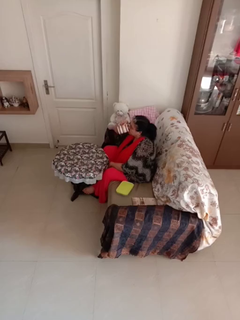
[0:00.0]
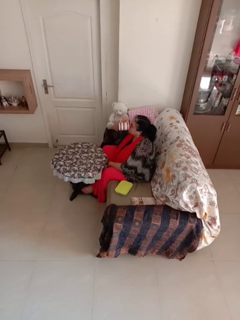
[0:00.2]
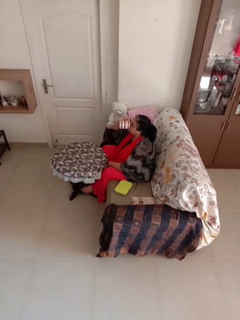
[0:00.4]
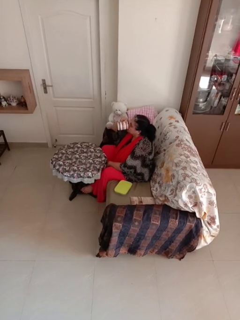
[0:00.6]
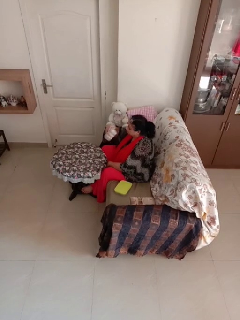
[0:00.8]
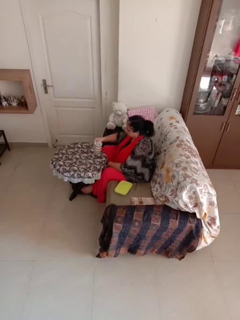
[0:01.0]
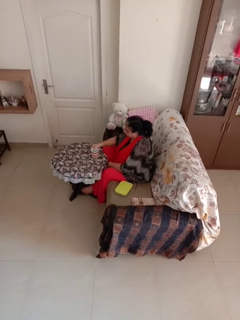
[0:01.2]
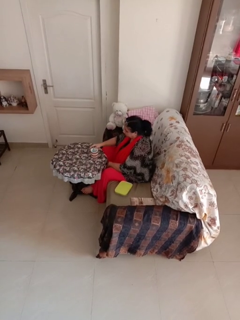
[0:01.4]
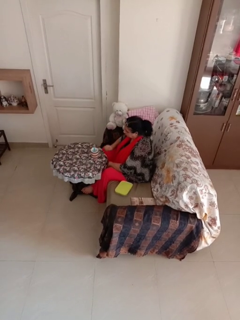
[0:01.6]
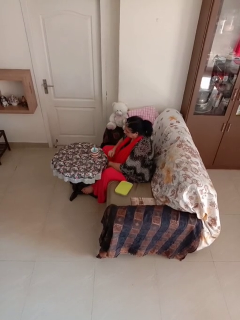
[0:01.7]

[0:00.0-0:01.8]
person drinks from mug

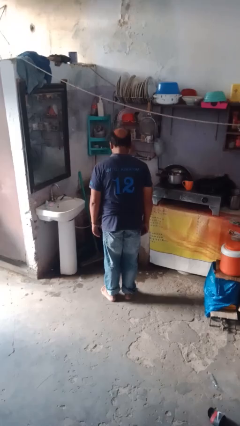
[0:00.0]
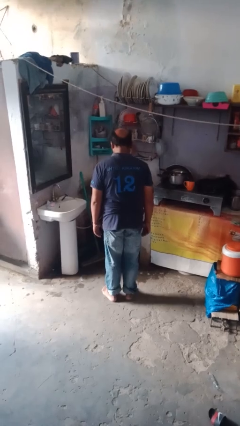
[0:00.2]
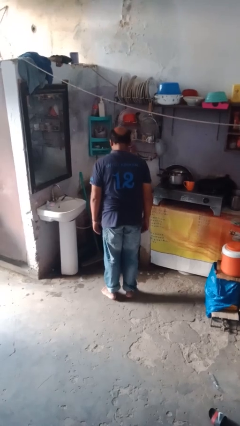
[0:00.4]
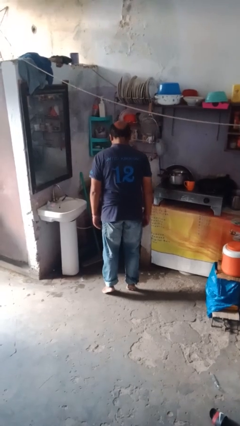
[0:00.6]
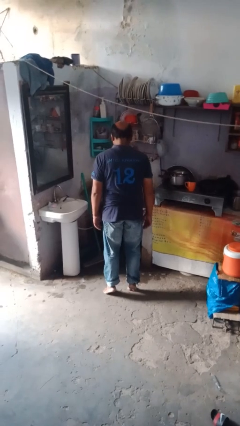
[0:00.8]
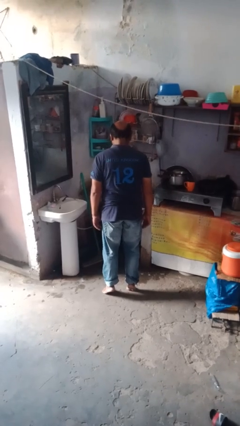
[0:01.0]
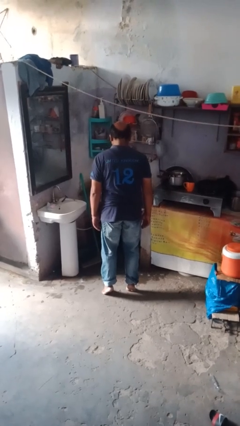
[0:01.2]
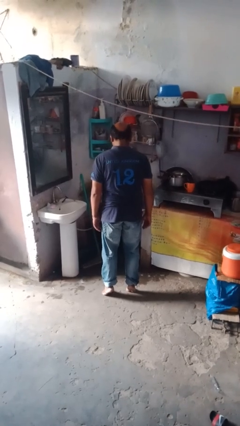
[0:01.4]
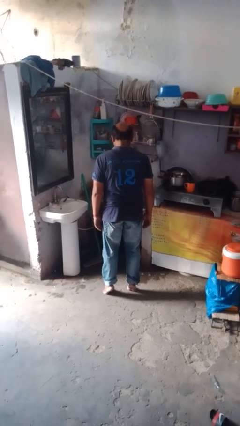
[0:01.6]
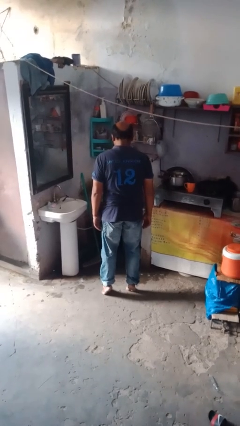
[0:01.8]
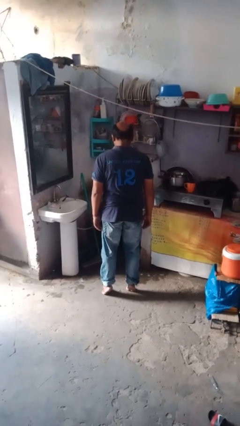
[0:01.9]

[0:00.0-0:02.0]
person walks tiptoe

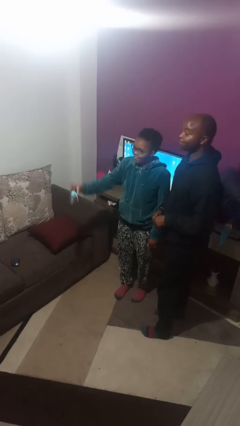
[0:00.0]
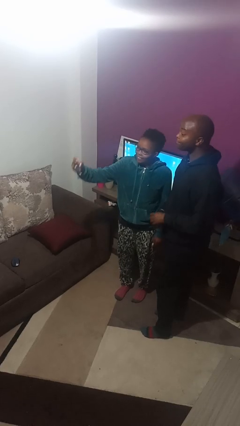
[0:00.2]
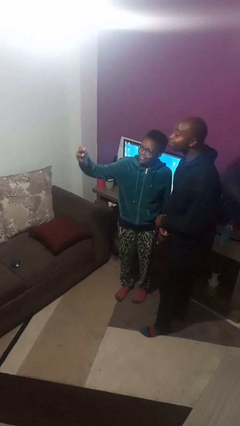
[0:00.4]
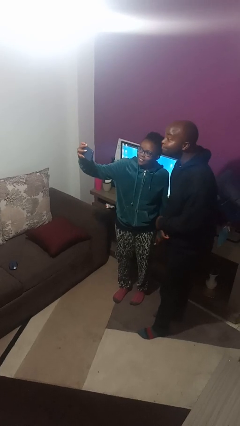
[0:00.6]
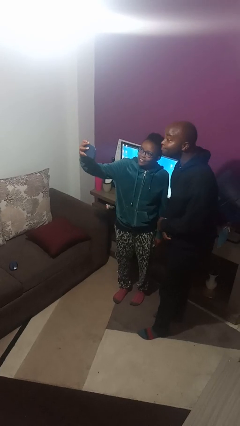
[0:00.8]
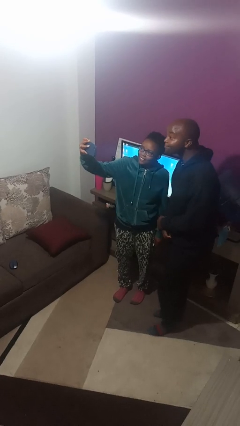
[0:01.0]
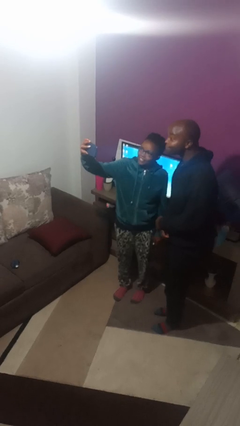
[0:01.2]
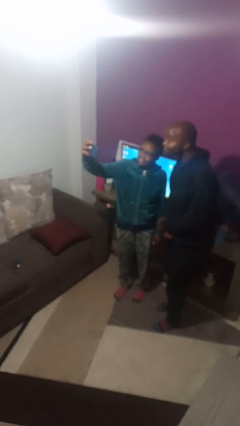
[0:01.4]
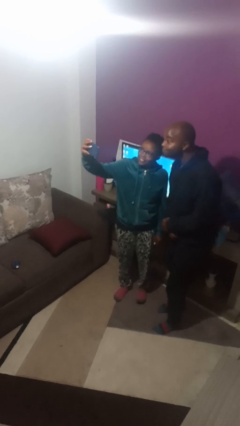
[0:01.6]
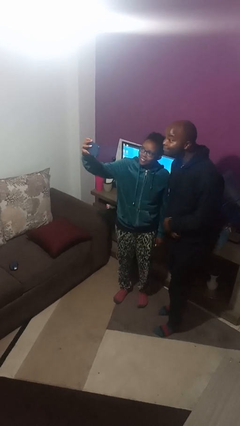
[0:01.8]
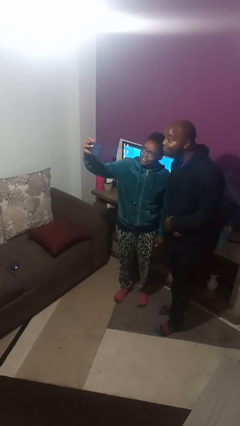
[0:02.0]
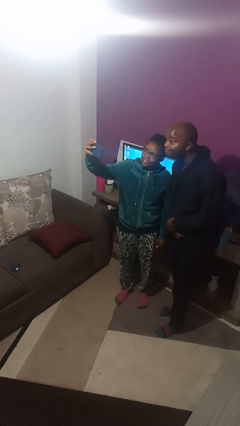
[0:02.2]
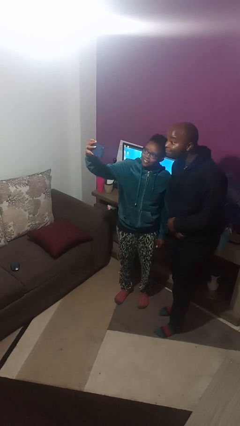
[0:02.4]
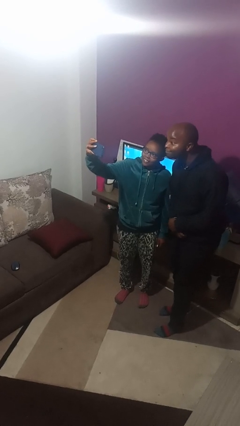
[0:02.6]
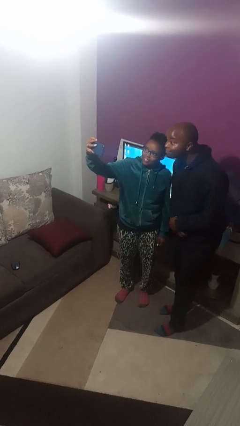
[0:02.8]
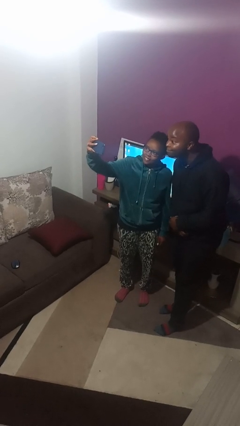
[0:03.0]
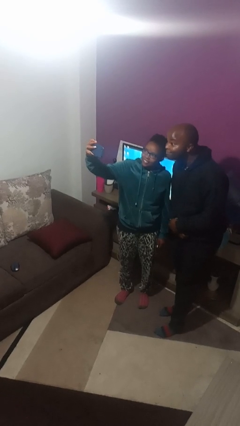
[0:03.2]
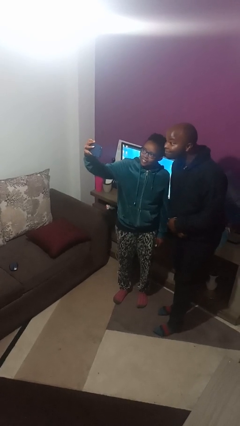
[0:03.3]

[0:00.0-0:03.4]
person takes selfie with person

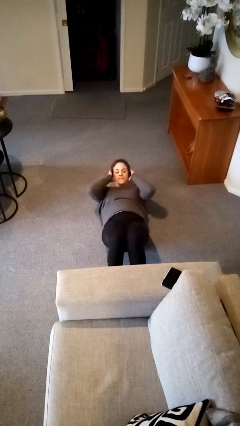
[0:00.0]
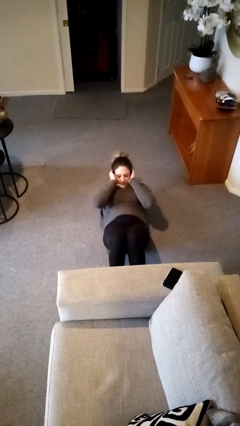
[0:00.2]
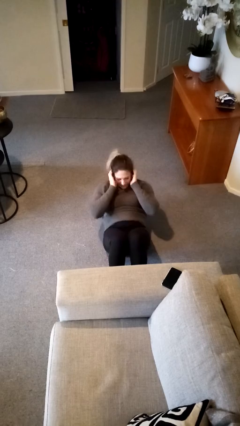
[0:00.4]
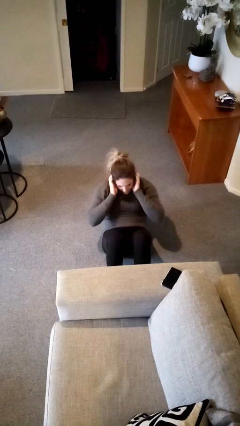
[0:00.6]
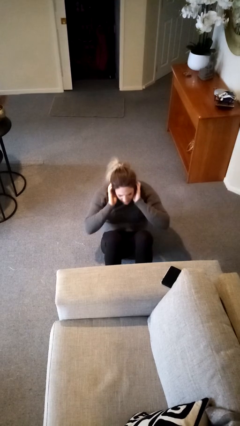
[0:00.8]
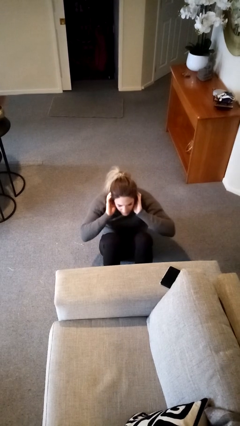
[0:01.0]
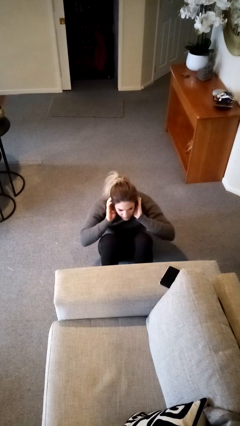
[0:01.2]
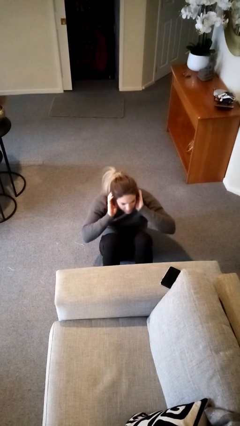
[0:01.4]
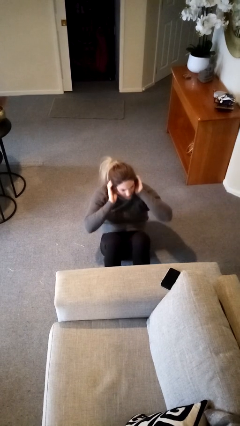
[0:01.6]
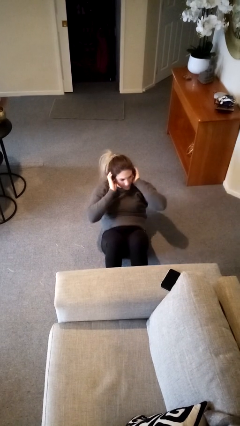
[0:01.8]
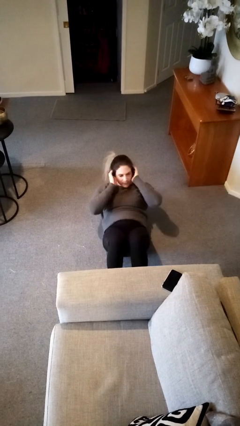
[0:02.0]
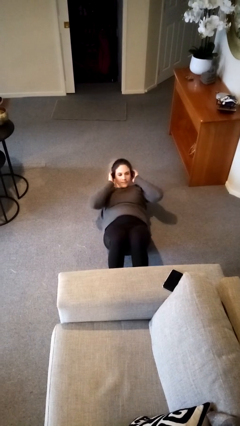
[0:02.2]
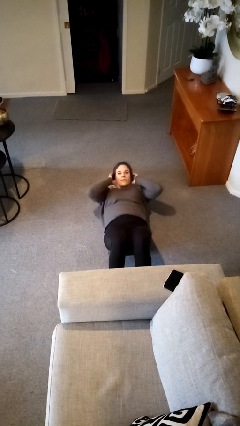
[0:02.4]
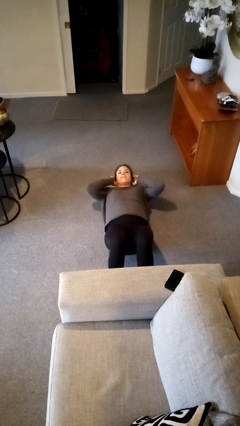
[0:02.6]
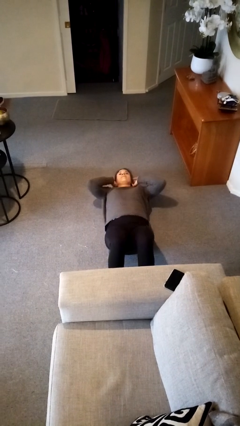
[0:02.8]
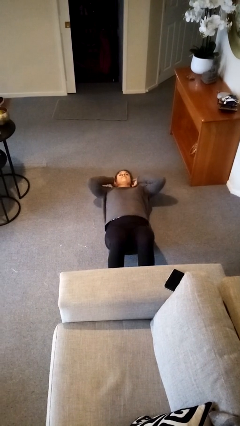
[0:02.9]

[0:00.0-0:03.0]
person exercises with situp

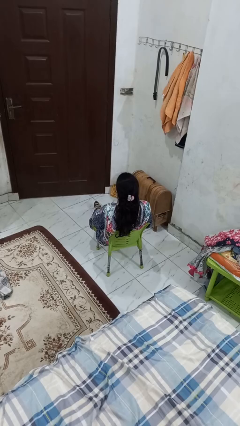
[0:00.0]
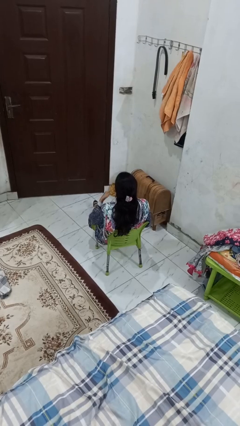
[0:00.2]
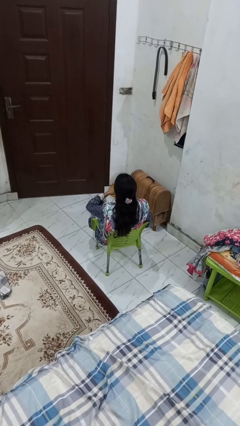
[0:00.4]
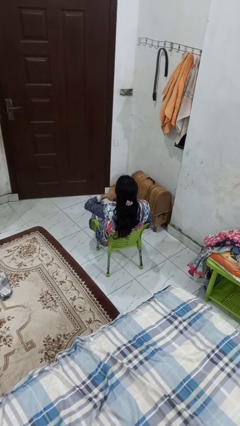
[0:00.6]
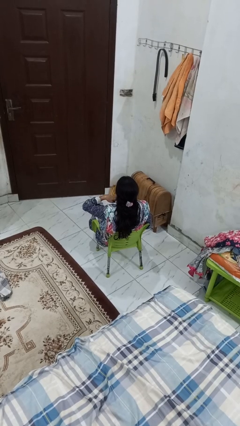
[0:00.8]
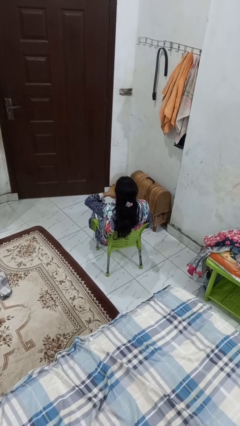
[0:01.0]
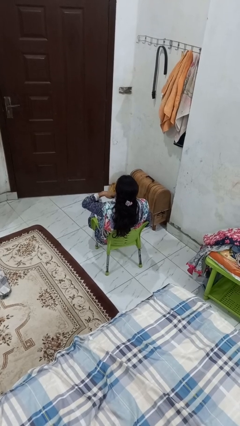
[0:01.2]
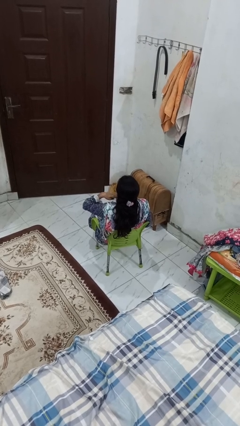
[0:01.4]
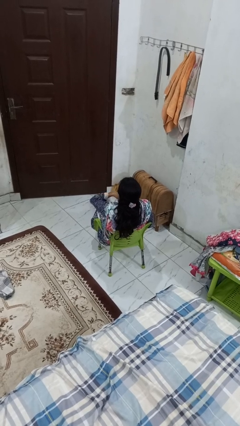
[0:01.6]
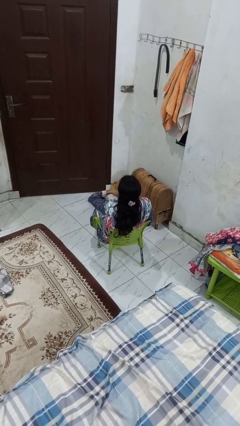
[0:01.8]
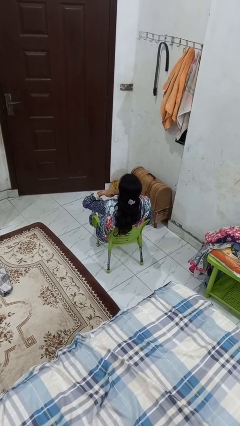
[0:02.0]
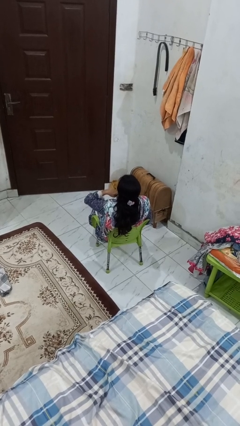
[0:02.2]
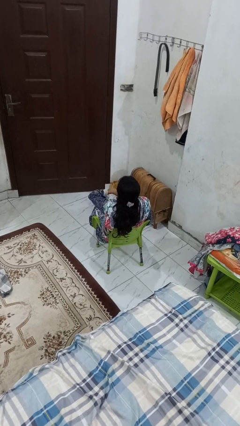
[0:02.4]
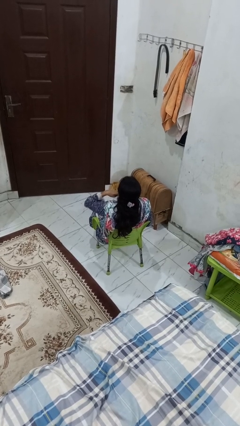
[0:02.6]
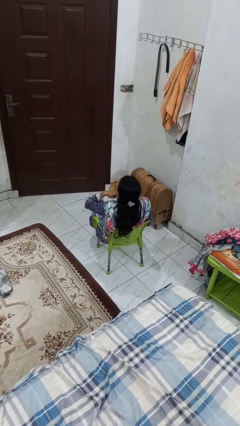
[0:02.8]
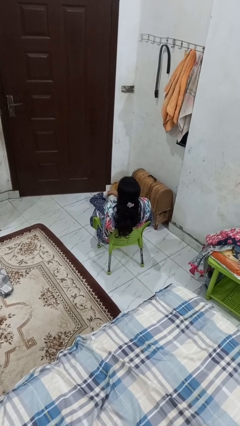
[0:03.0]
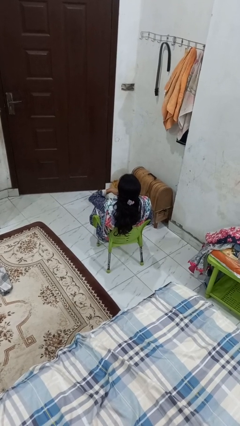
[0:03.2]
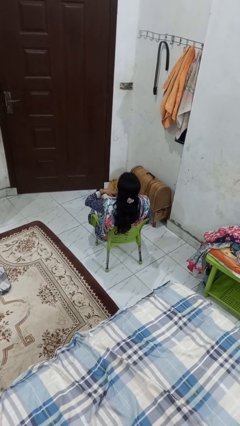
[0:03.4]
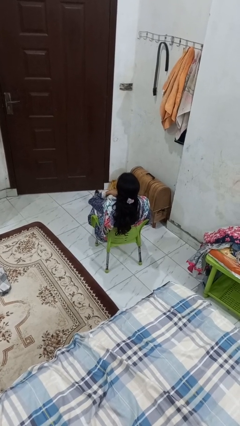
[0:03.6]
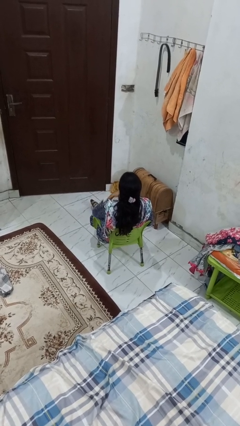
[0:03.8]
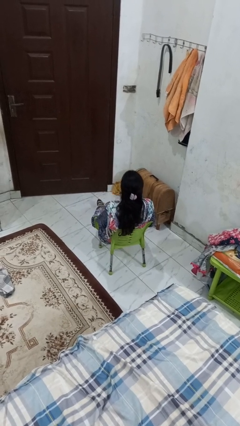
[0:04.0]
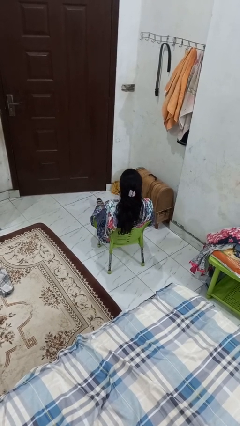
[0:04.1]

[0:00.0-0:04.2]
person gestures cut

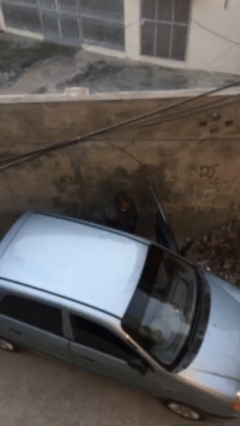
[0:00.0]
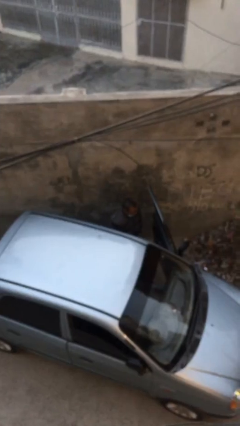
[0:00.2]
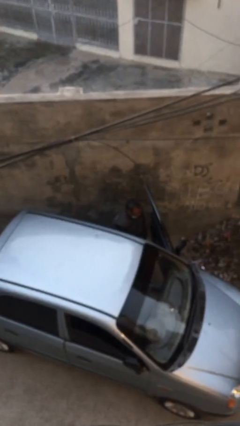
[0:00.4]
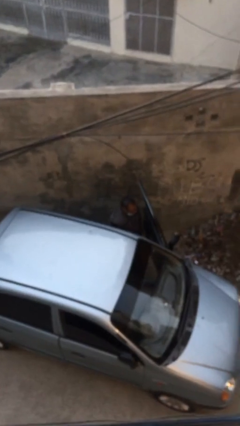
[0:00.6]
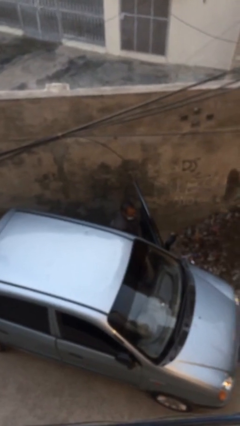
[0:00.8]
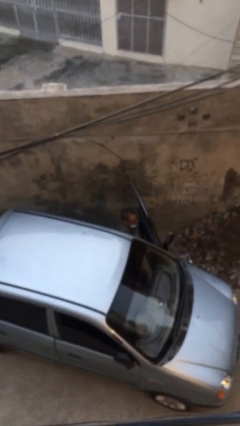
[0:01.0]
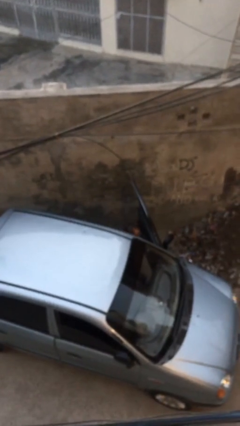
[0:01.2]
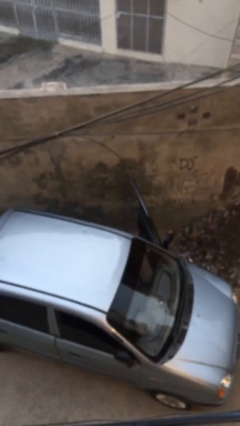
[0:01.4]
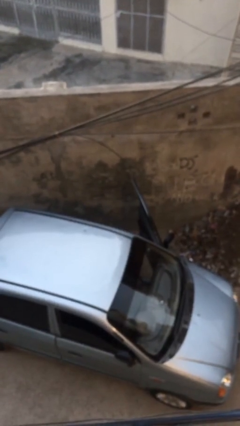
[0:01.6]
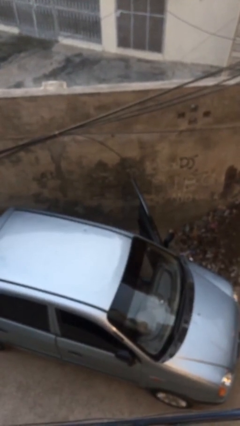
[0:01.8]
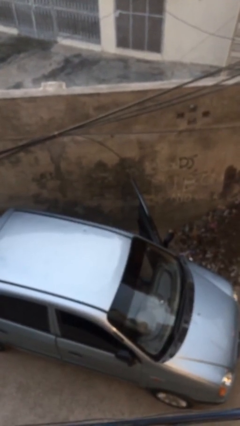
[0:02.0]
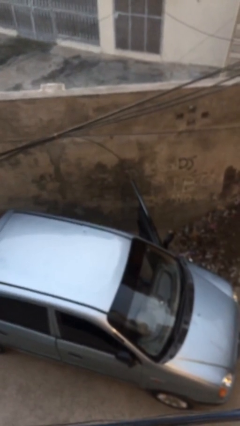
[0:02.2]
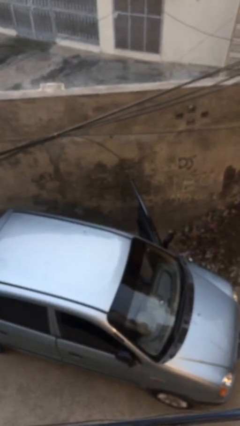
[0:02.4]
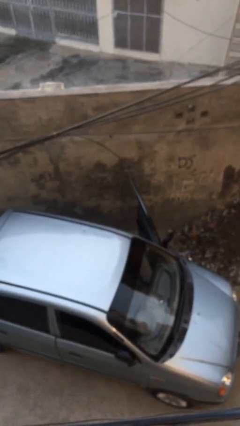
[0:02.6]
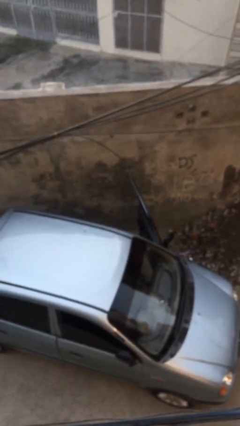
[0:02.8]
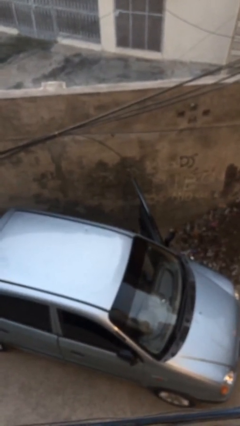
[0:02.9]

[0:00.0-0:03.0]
person enters car
